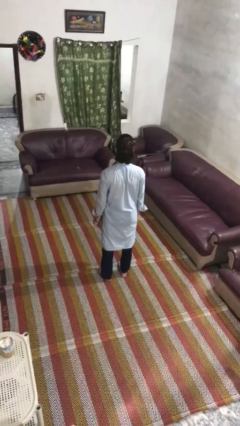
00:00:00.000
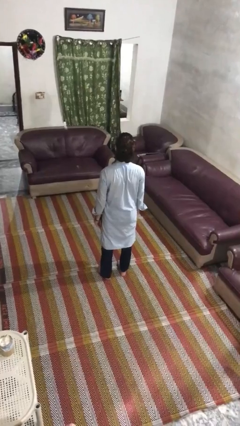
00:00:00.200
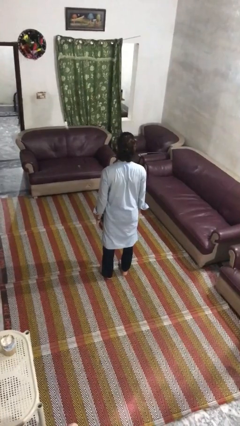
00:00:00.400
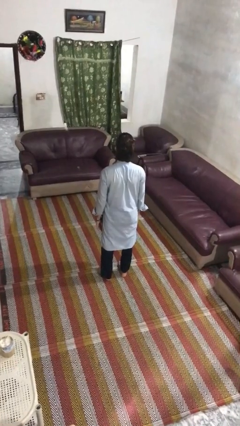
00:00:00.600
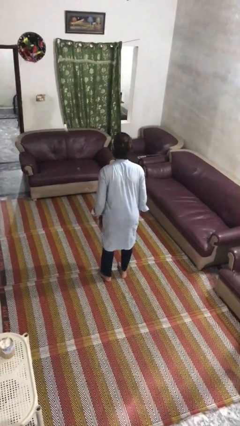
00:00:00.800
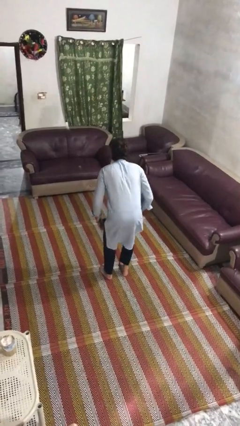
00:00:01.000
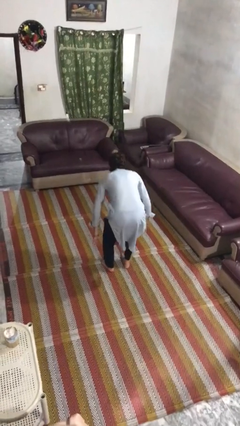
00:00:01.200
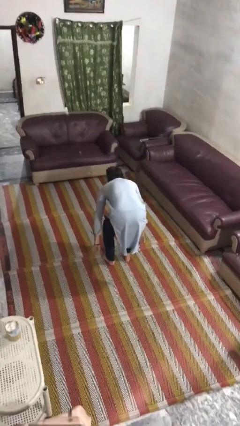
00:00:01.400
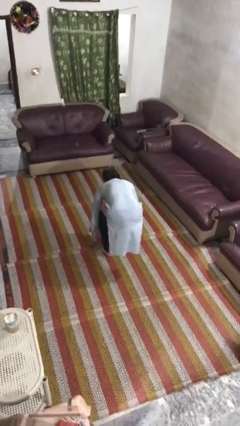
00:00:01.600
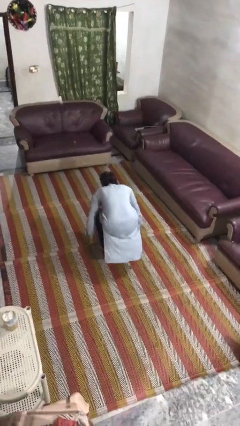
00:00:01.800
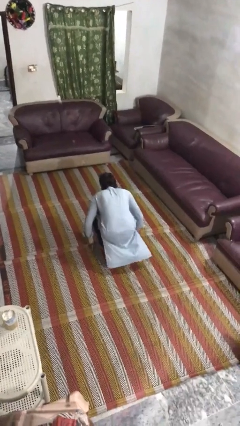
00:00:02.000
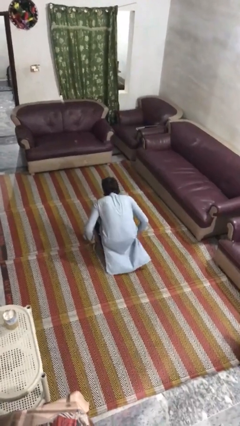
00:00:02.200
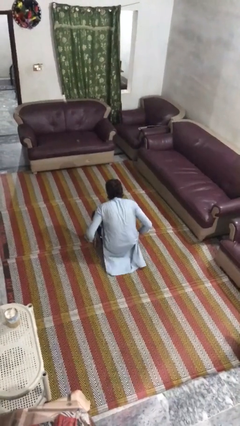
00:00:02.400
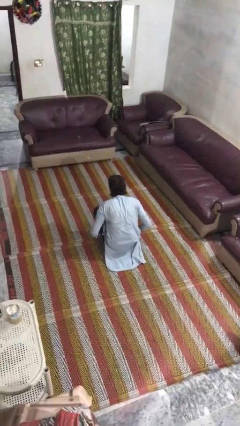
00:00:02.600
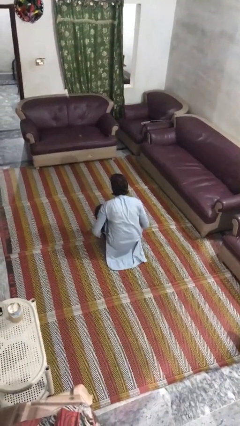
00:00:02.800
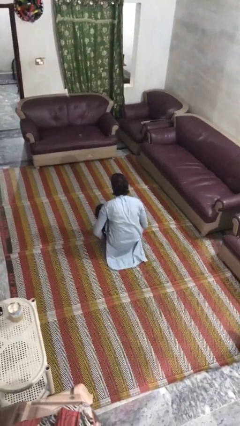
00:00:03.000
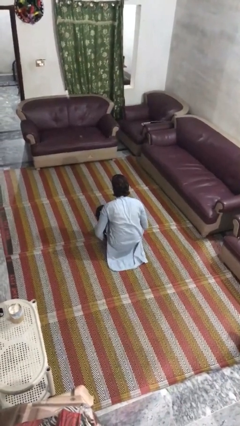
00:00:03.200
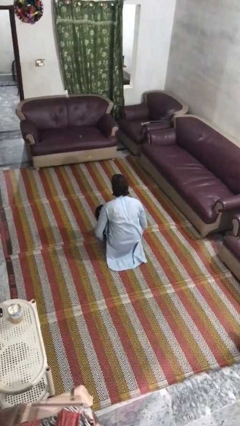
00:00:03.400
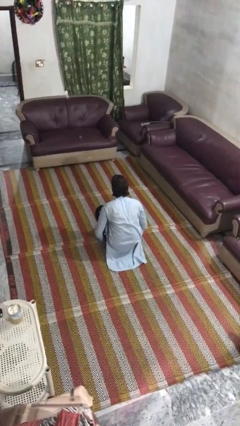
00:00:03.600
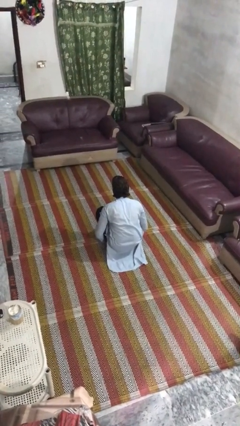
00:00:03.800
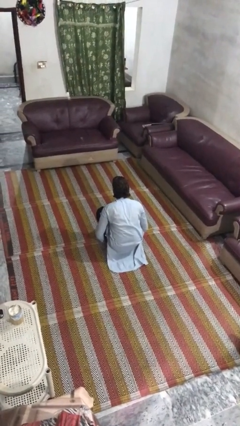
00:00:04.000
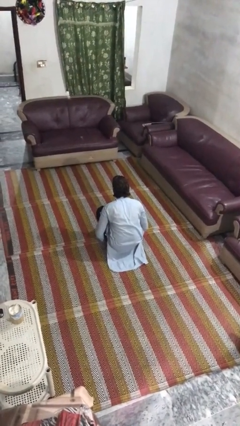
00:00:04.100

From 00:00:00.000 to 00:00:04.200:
person squats

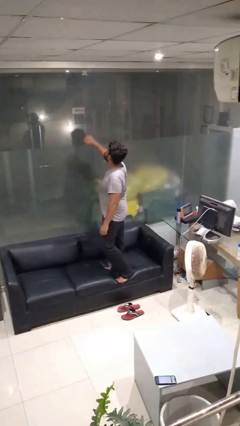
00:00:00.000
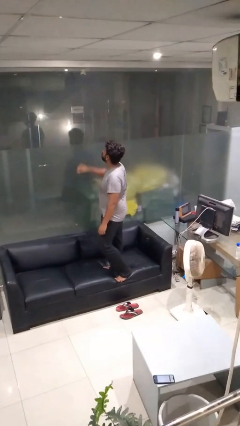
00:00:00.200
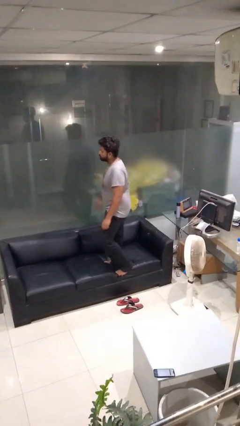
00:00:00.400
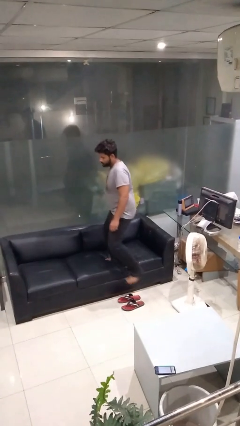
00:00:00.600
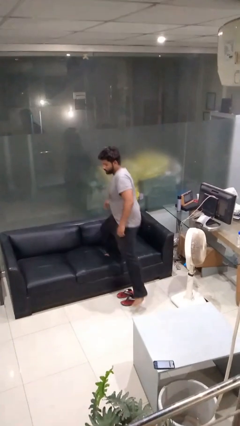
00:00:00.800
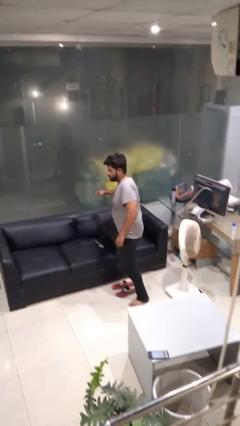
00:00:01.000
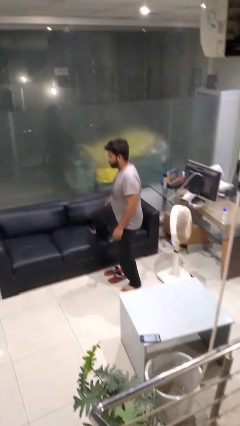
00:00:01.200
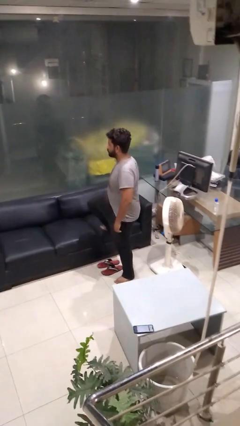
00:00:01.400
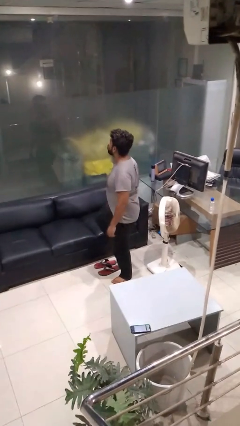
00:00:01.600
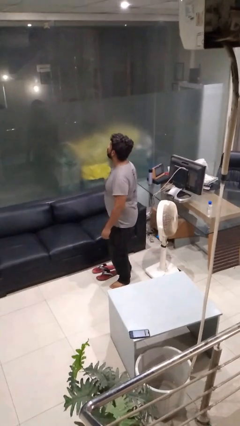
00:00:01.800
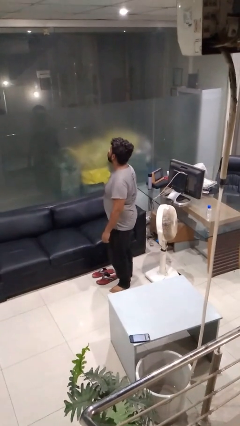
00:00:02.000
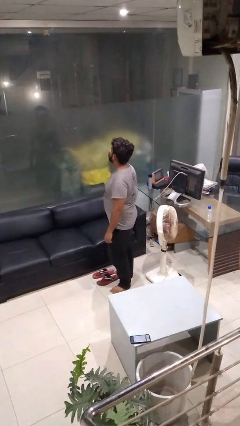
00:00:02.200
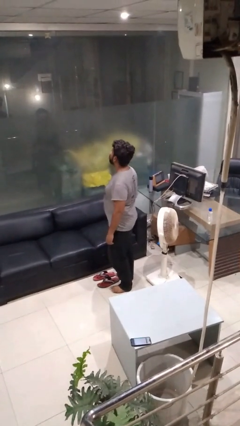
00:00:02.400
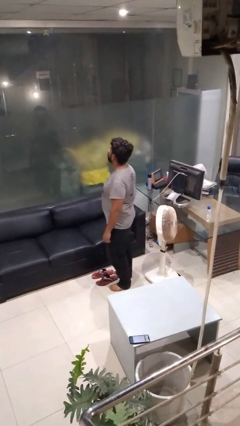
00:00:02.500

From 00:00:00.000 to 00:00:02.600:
person climbs off couch

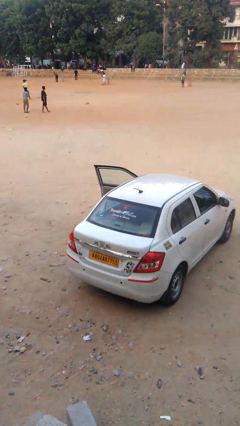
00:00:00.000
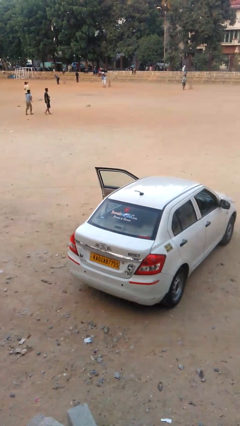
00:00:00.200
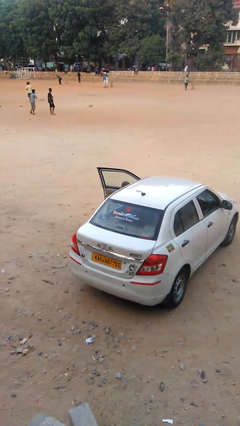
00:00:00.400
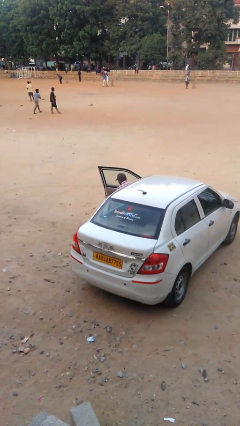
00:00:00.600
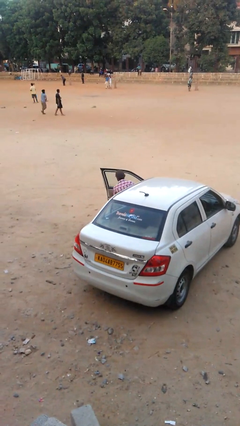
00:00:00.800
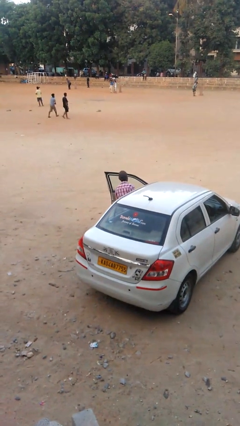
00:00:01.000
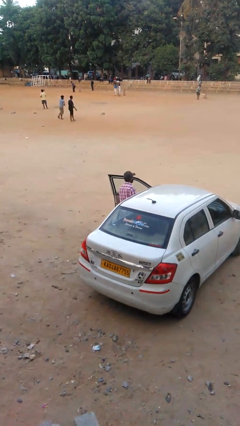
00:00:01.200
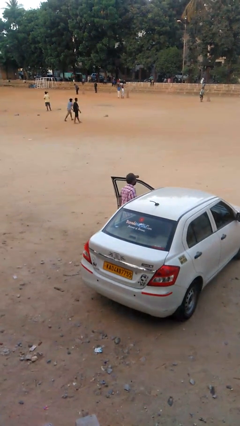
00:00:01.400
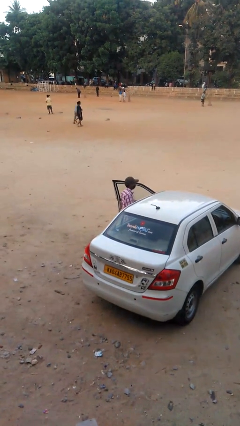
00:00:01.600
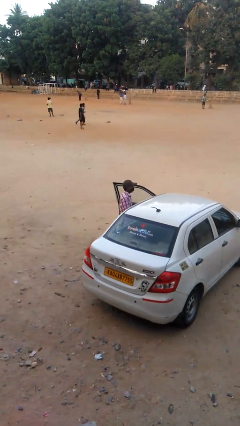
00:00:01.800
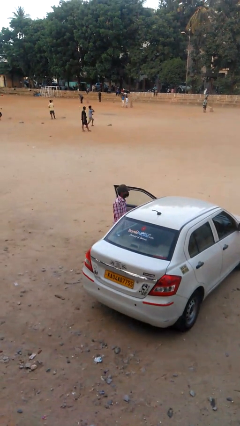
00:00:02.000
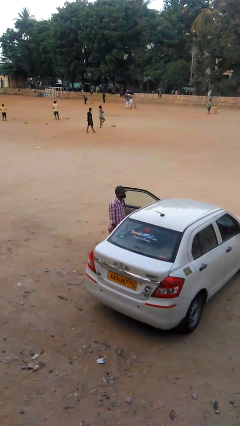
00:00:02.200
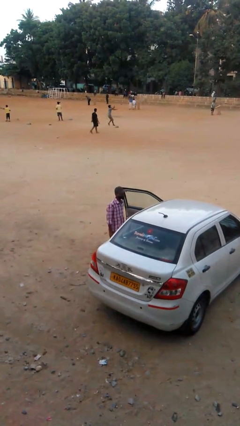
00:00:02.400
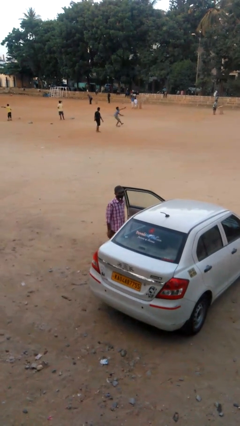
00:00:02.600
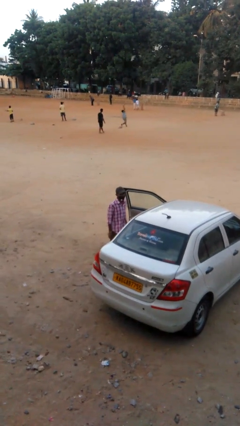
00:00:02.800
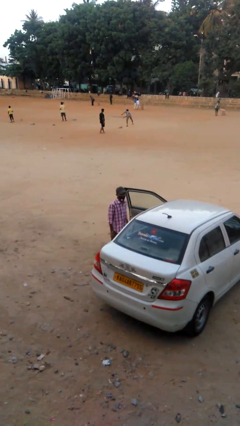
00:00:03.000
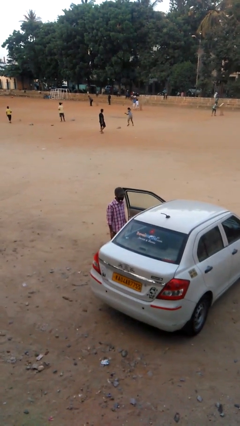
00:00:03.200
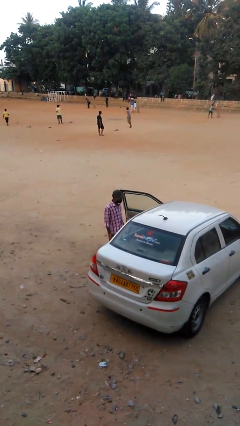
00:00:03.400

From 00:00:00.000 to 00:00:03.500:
person exits car

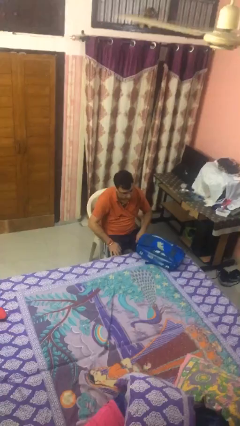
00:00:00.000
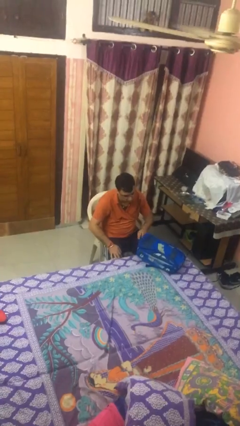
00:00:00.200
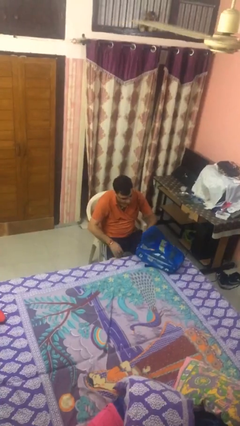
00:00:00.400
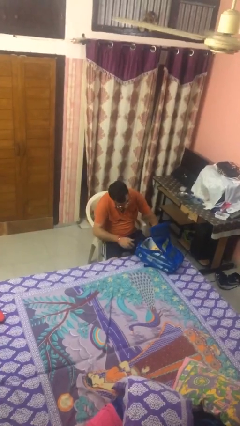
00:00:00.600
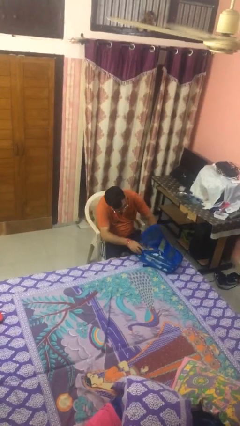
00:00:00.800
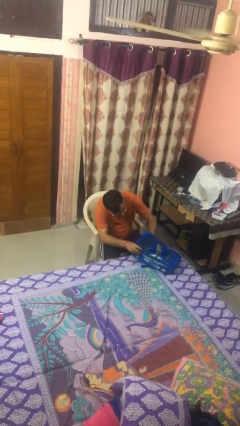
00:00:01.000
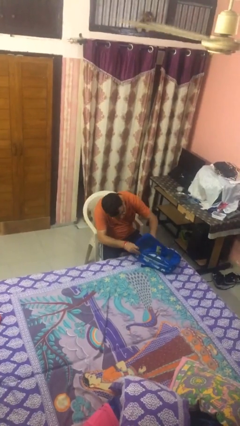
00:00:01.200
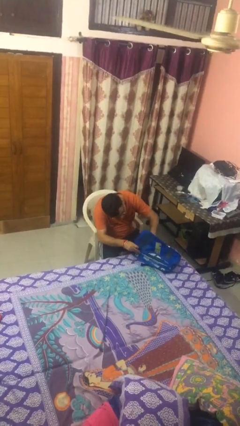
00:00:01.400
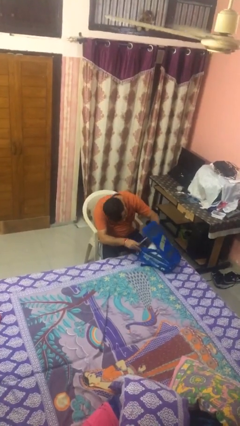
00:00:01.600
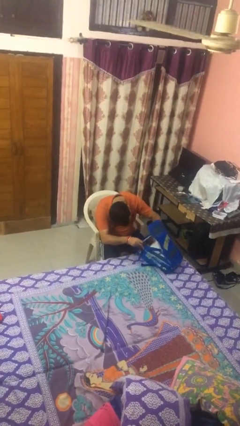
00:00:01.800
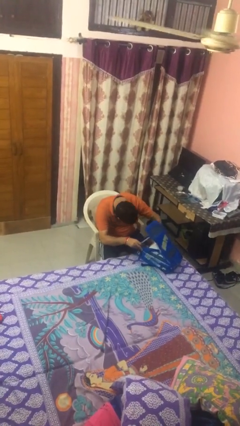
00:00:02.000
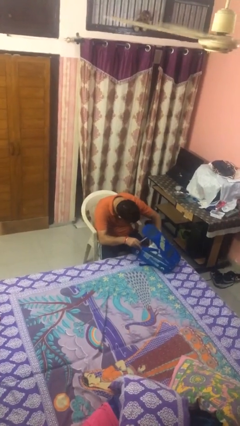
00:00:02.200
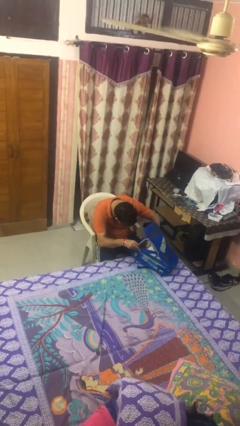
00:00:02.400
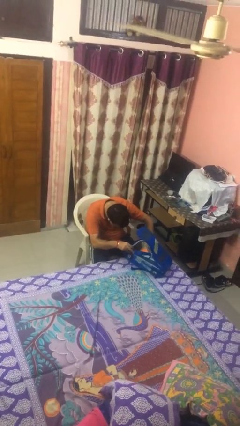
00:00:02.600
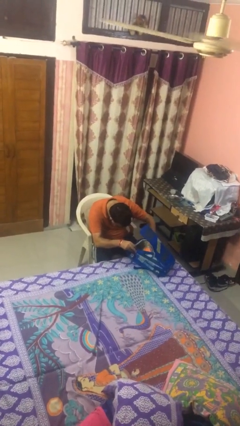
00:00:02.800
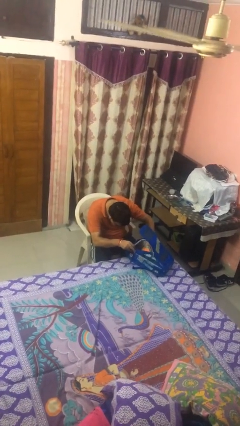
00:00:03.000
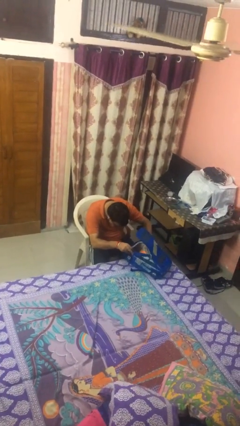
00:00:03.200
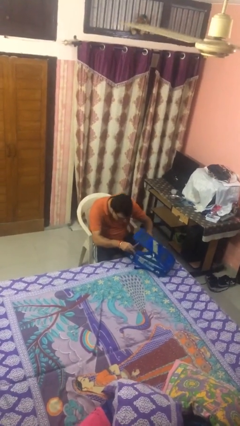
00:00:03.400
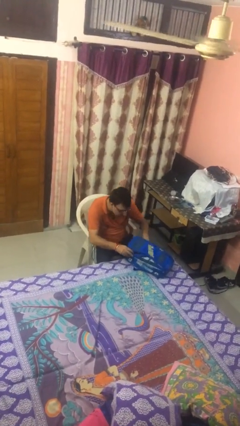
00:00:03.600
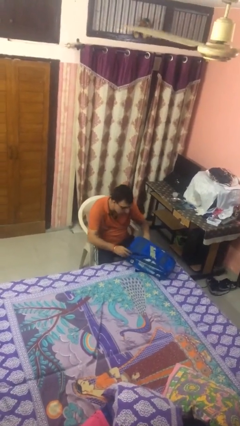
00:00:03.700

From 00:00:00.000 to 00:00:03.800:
person searches in bag

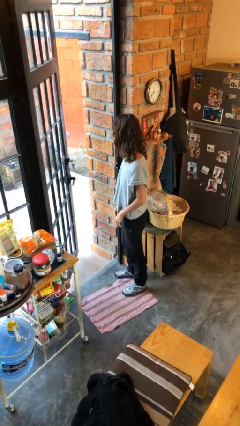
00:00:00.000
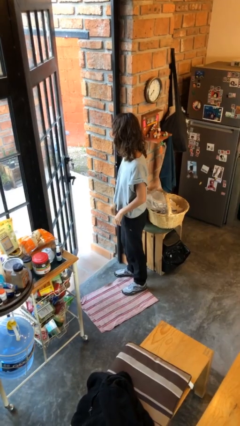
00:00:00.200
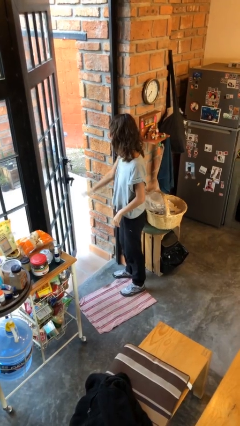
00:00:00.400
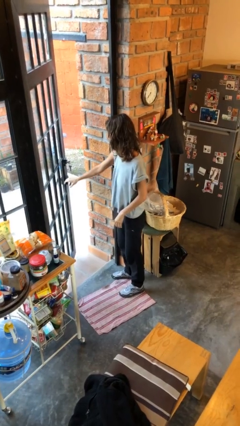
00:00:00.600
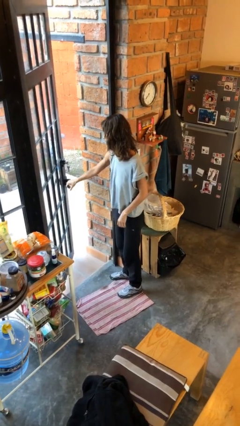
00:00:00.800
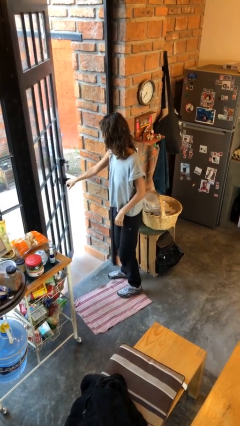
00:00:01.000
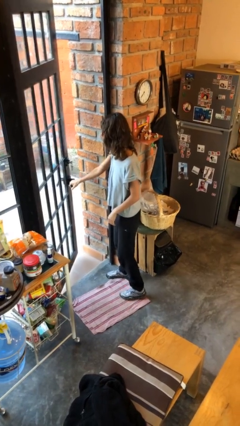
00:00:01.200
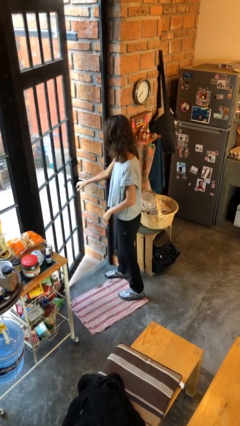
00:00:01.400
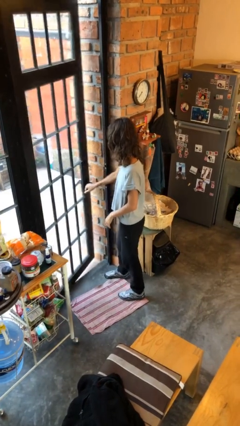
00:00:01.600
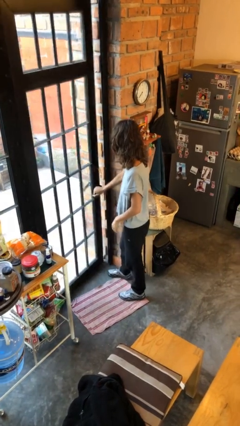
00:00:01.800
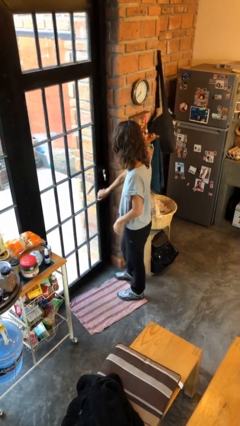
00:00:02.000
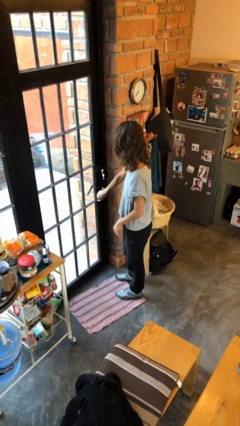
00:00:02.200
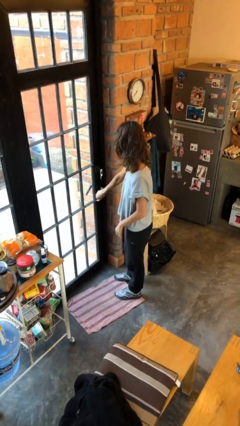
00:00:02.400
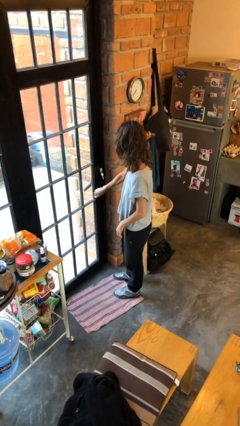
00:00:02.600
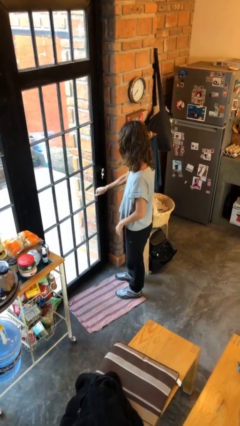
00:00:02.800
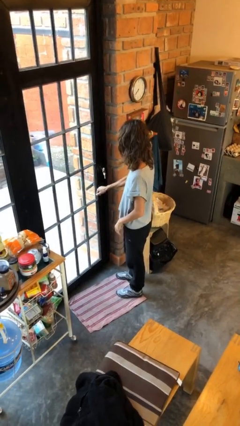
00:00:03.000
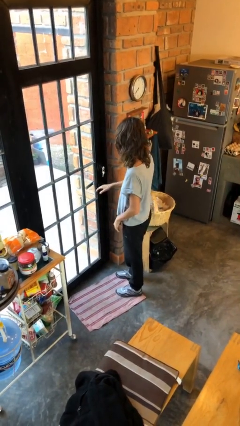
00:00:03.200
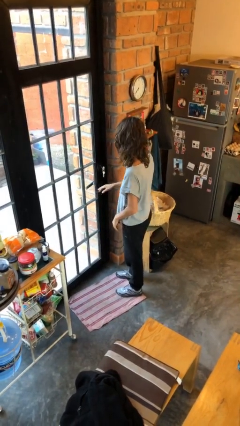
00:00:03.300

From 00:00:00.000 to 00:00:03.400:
person closes facility door

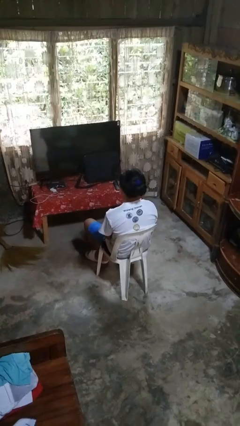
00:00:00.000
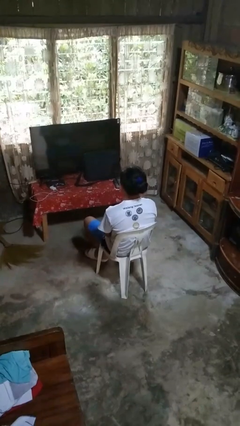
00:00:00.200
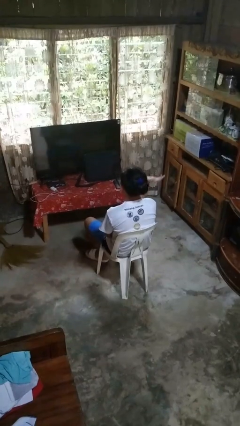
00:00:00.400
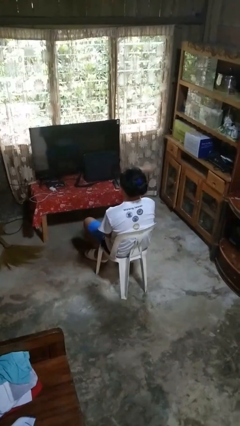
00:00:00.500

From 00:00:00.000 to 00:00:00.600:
person gestures swipe left
